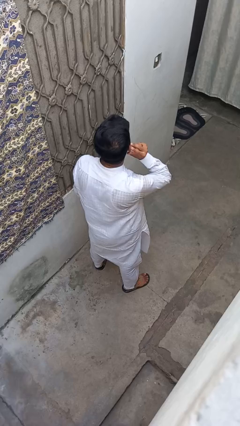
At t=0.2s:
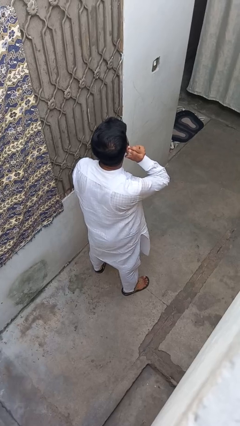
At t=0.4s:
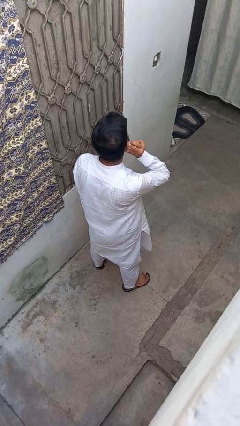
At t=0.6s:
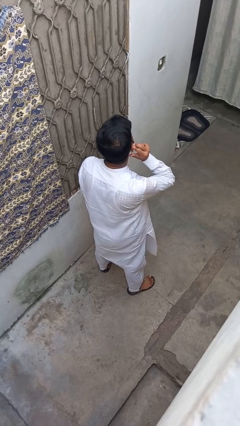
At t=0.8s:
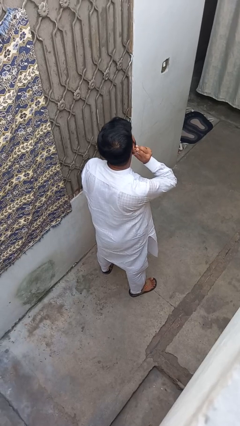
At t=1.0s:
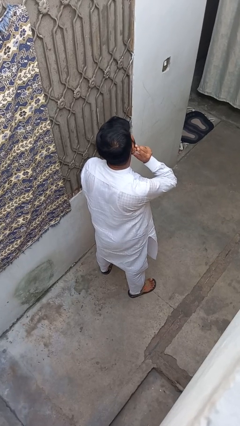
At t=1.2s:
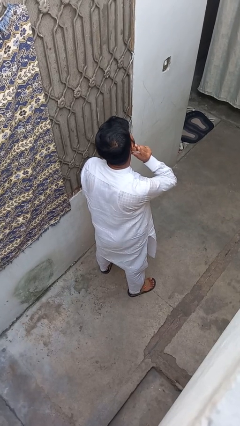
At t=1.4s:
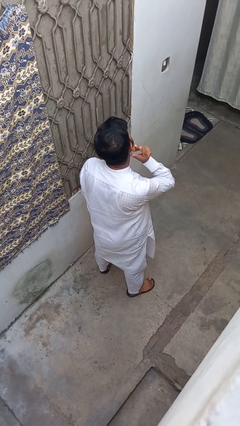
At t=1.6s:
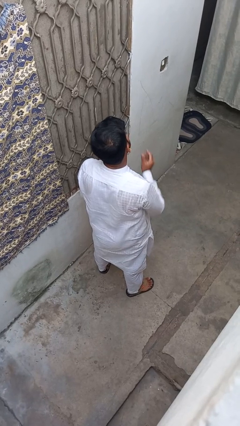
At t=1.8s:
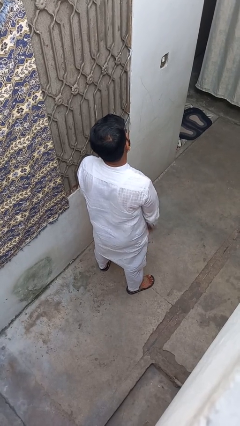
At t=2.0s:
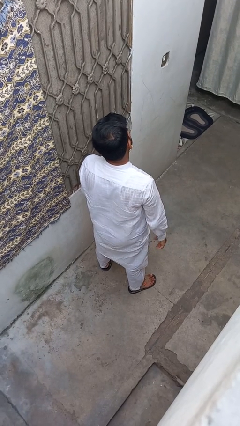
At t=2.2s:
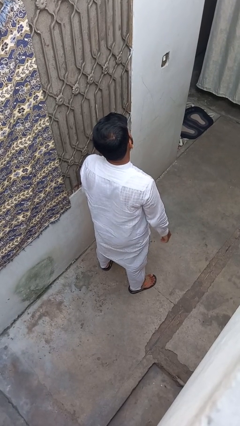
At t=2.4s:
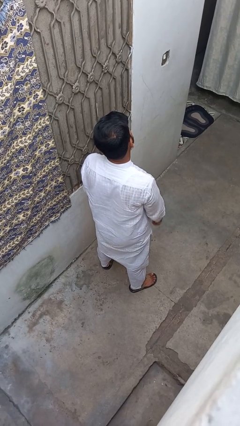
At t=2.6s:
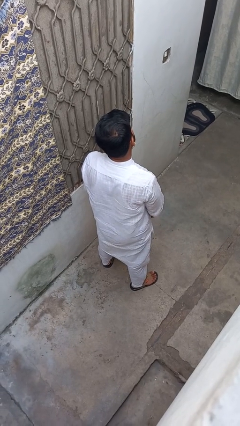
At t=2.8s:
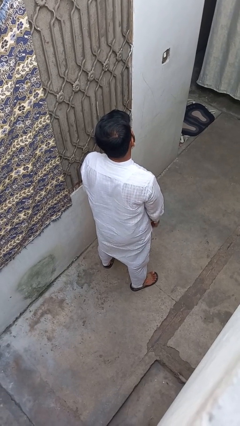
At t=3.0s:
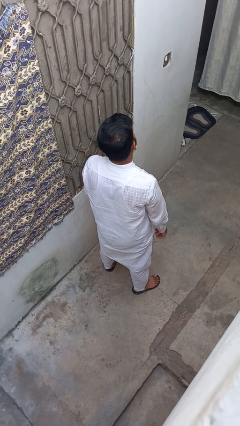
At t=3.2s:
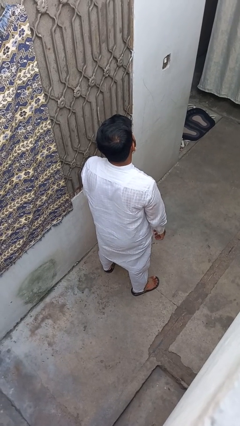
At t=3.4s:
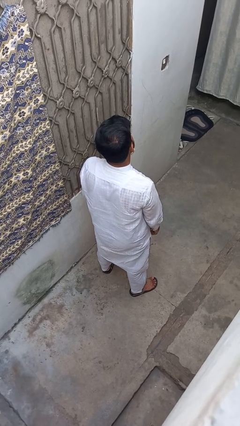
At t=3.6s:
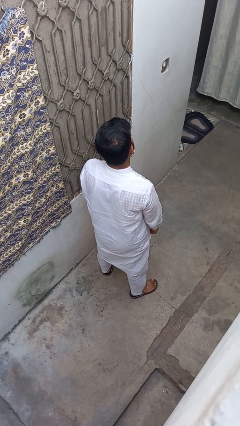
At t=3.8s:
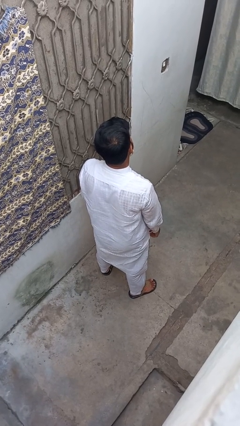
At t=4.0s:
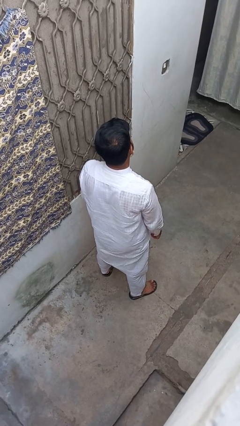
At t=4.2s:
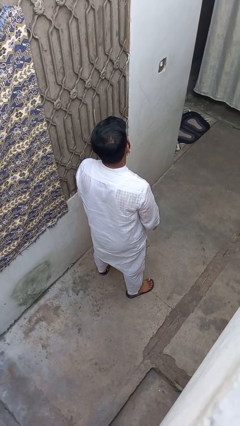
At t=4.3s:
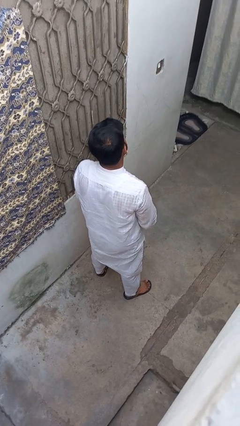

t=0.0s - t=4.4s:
person puts on earrings

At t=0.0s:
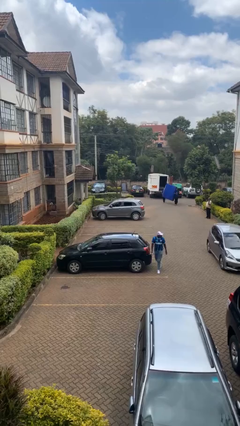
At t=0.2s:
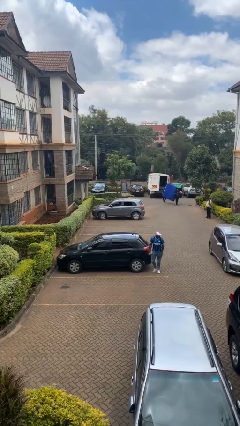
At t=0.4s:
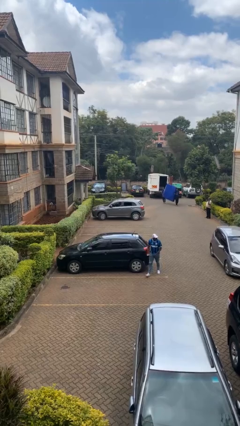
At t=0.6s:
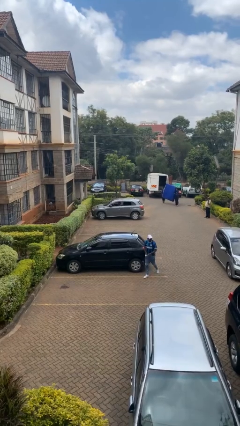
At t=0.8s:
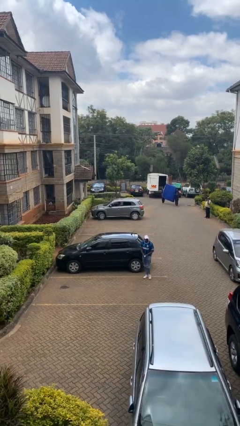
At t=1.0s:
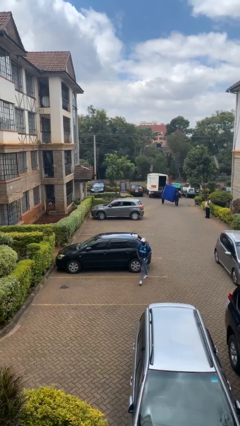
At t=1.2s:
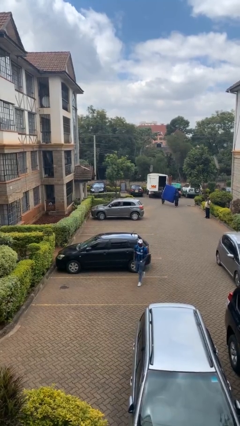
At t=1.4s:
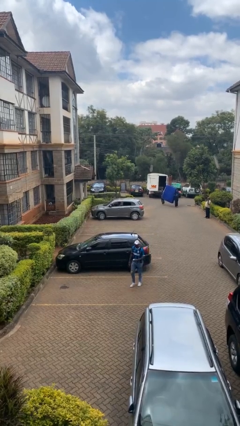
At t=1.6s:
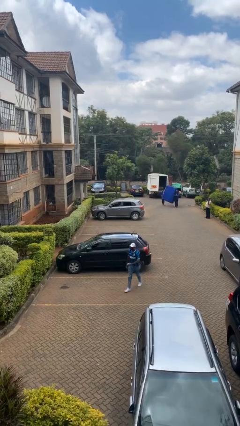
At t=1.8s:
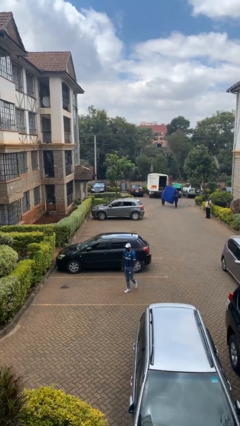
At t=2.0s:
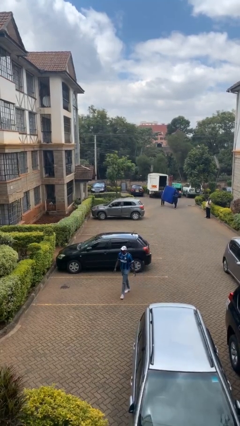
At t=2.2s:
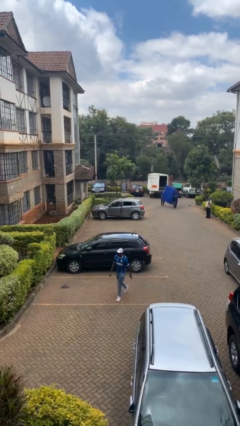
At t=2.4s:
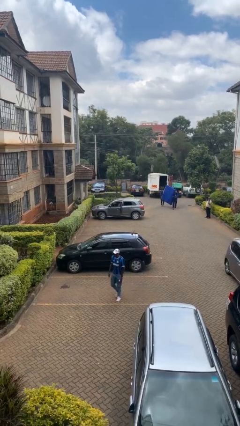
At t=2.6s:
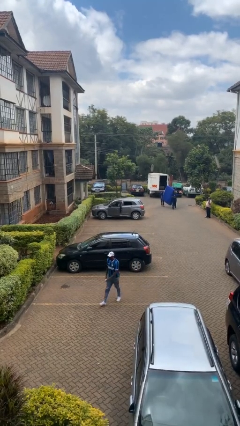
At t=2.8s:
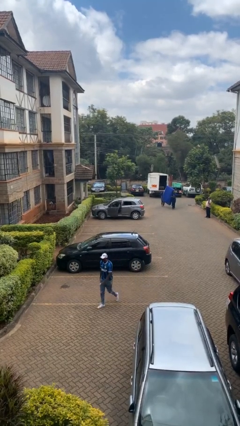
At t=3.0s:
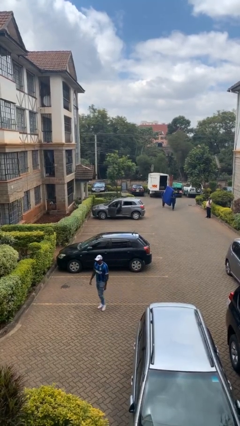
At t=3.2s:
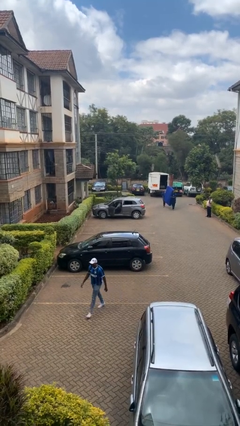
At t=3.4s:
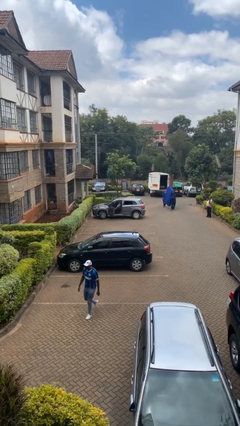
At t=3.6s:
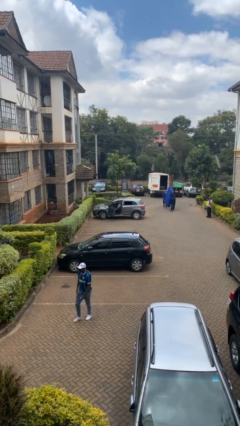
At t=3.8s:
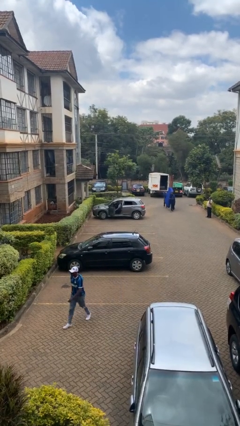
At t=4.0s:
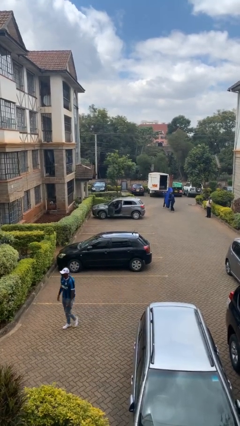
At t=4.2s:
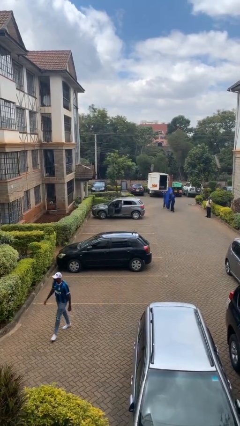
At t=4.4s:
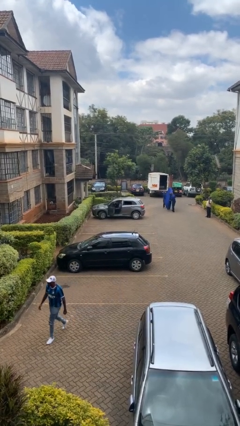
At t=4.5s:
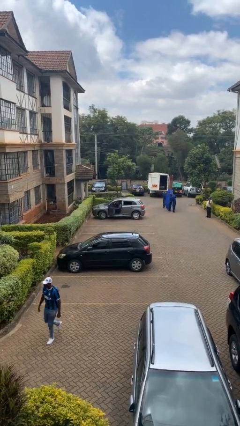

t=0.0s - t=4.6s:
person opens car door

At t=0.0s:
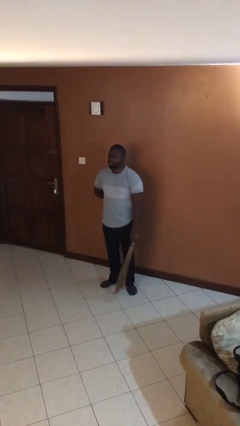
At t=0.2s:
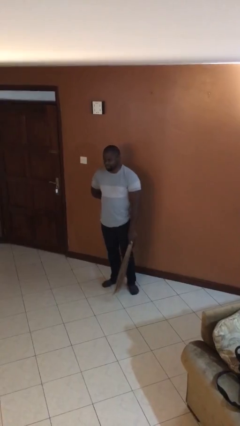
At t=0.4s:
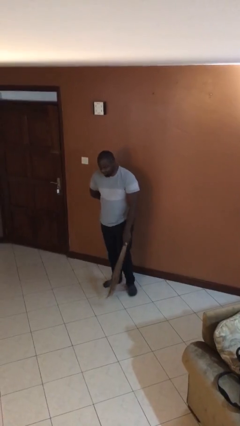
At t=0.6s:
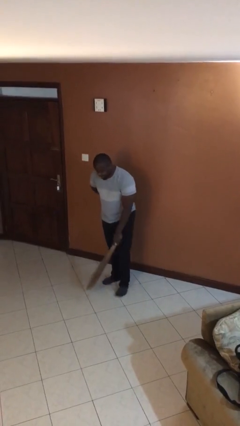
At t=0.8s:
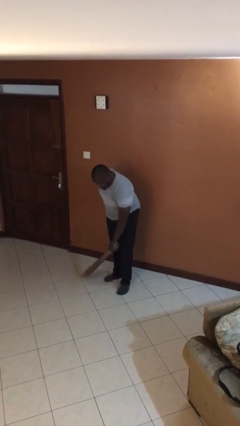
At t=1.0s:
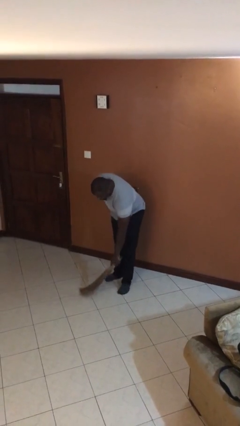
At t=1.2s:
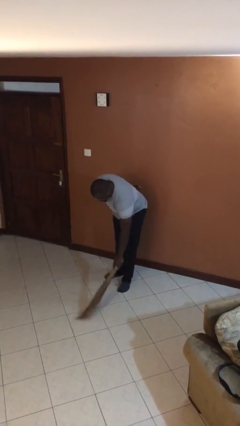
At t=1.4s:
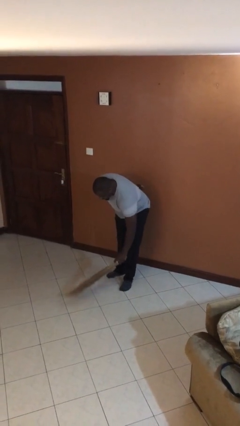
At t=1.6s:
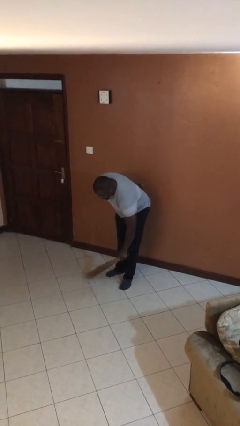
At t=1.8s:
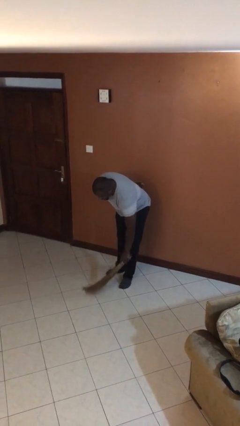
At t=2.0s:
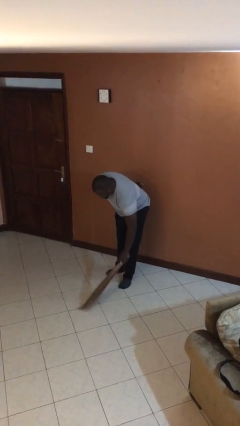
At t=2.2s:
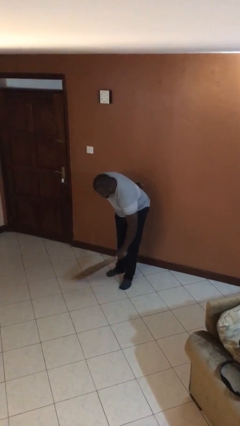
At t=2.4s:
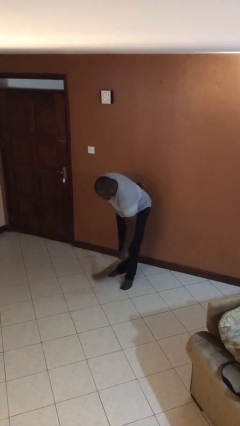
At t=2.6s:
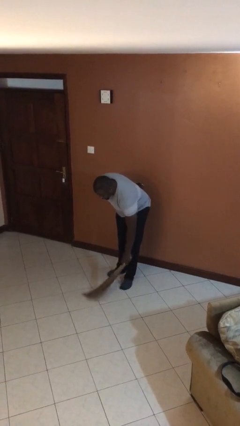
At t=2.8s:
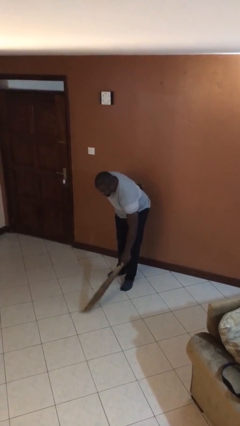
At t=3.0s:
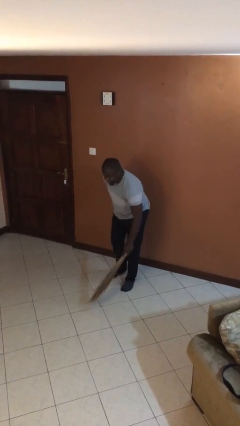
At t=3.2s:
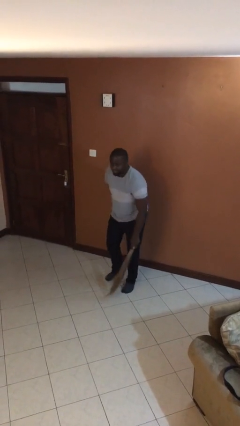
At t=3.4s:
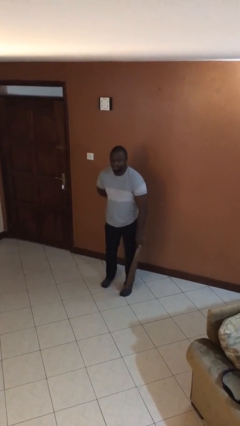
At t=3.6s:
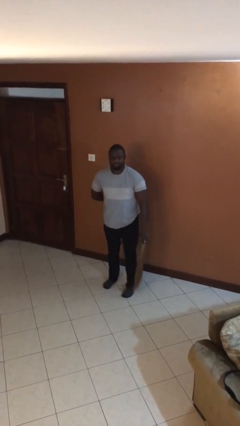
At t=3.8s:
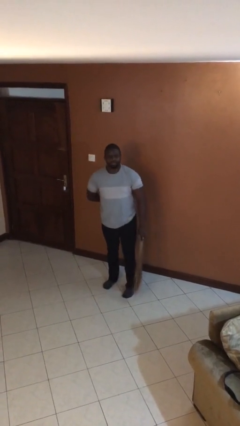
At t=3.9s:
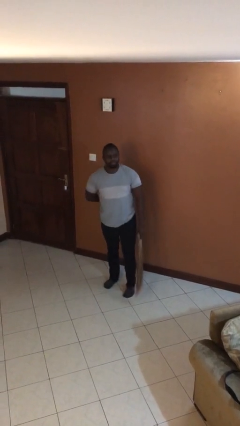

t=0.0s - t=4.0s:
person sweeps floor

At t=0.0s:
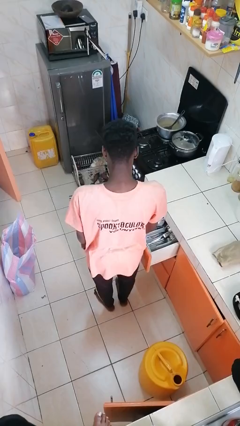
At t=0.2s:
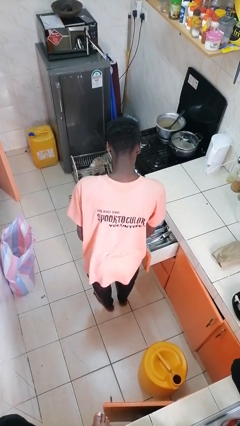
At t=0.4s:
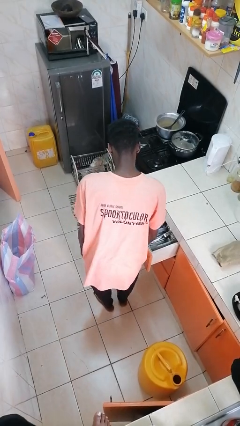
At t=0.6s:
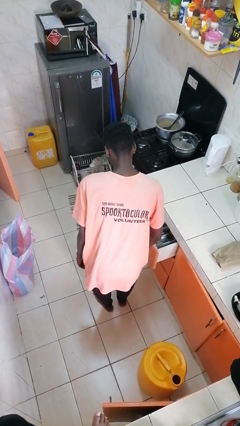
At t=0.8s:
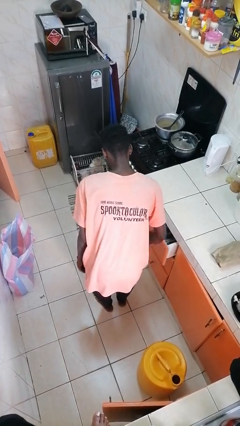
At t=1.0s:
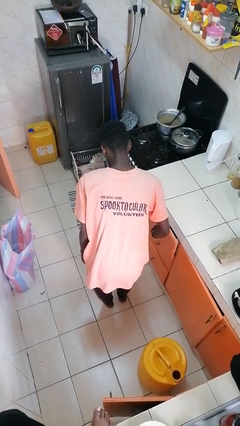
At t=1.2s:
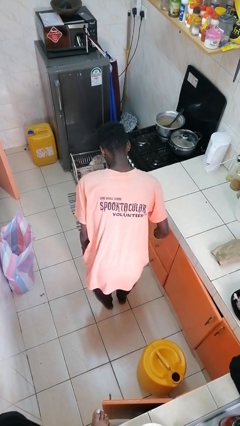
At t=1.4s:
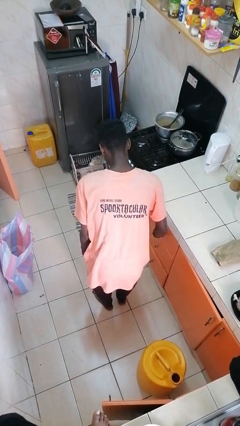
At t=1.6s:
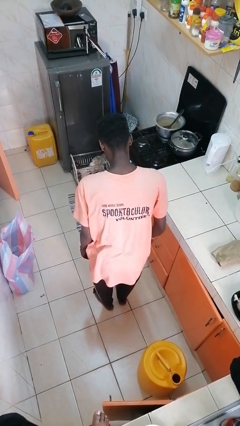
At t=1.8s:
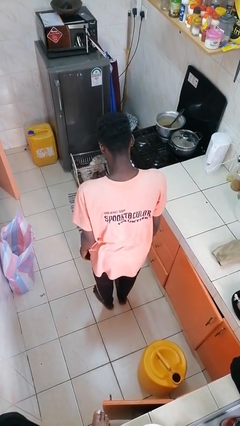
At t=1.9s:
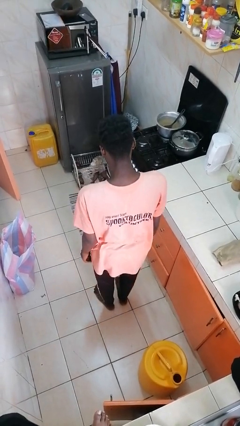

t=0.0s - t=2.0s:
person closes kitchen drawer

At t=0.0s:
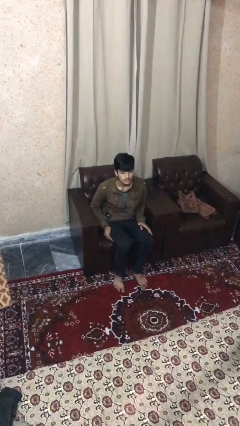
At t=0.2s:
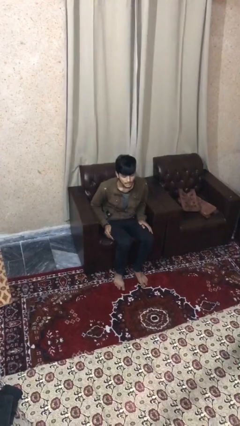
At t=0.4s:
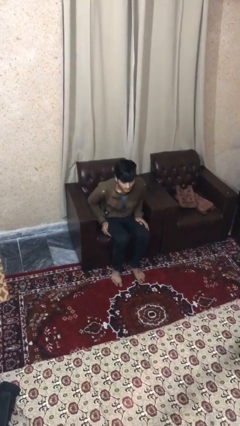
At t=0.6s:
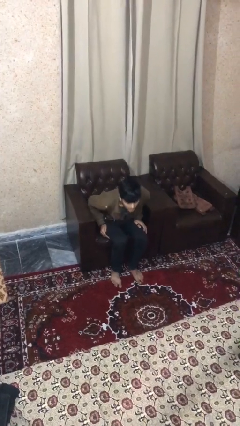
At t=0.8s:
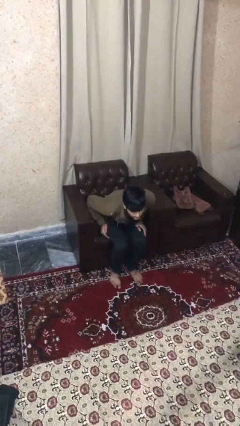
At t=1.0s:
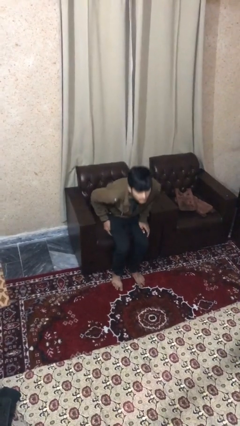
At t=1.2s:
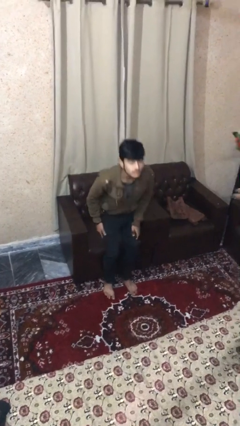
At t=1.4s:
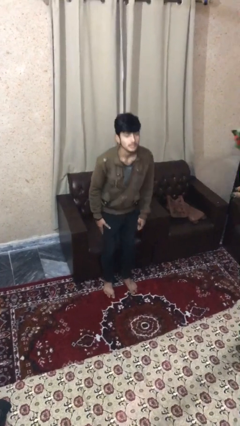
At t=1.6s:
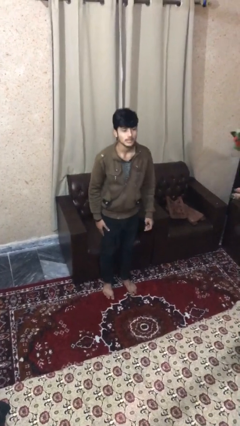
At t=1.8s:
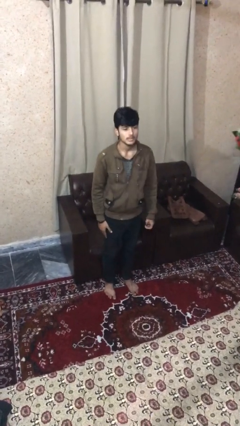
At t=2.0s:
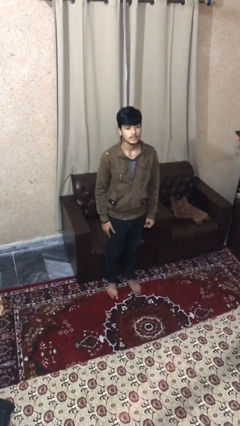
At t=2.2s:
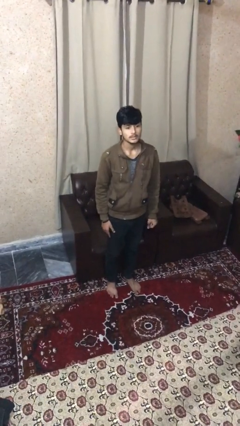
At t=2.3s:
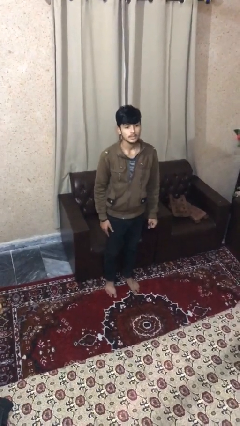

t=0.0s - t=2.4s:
person stands up

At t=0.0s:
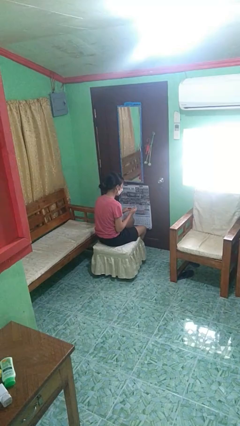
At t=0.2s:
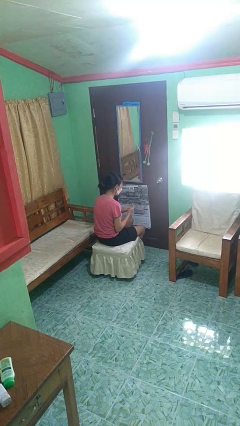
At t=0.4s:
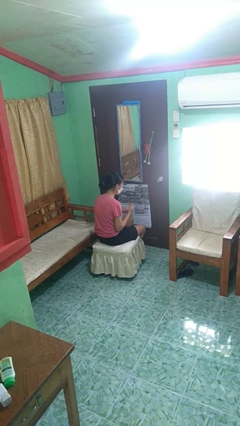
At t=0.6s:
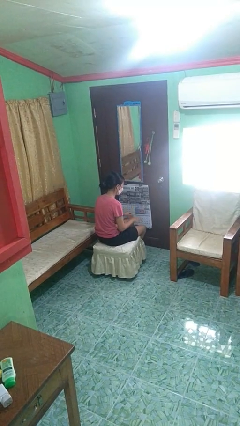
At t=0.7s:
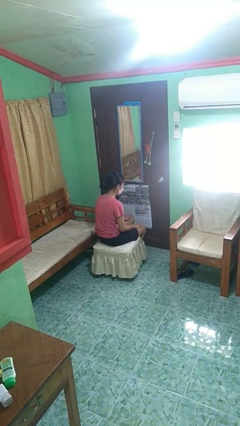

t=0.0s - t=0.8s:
person puts on ring
